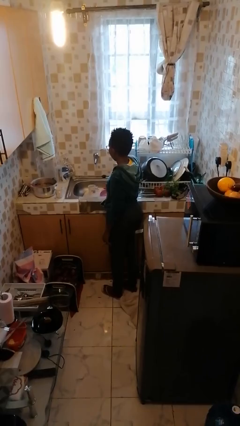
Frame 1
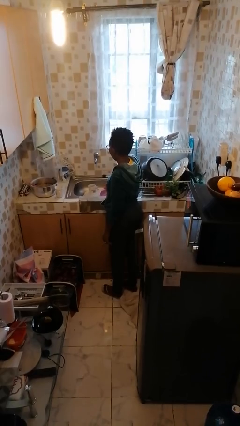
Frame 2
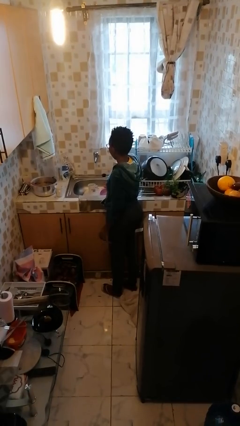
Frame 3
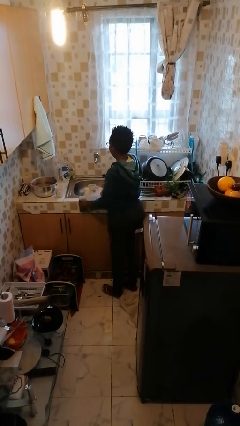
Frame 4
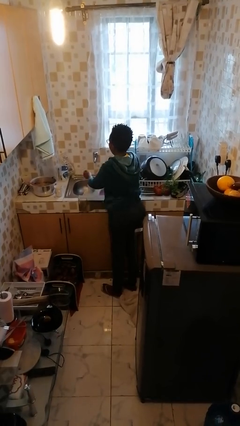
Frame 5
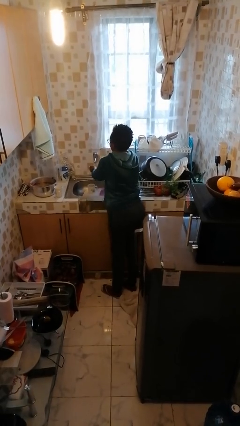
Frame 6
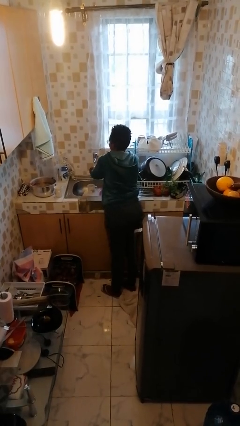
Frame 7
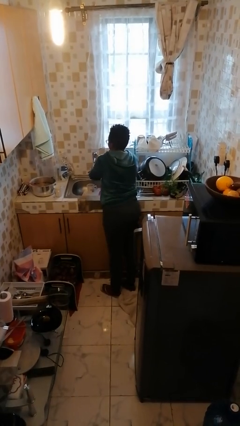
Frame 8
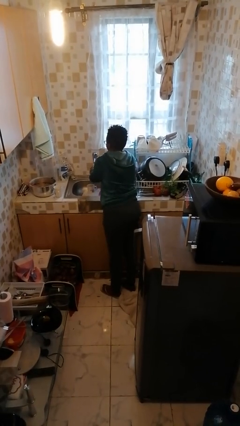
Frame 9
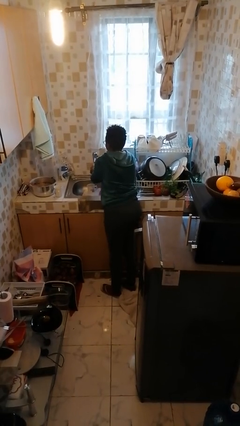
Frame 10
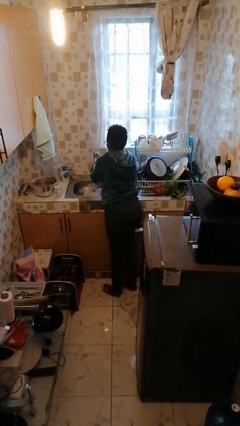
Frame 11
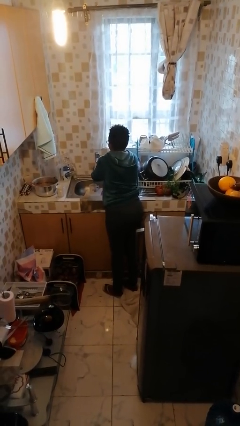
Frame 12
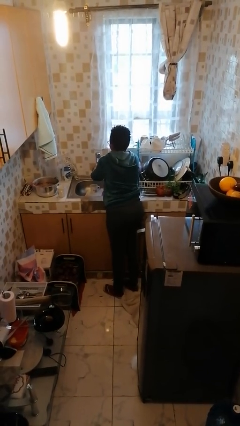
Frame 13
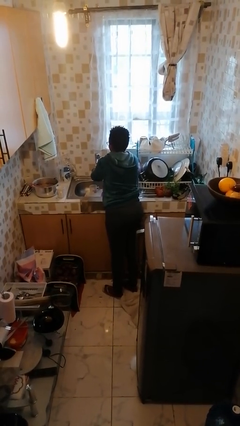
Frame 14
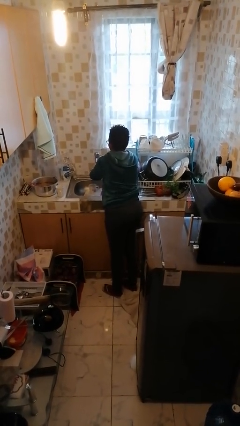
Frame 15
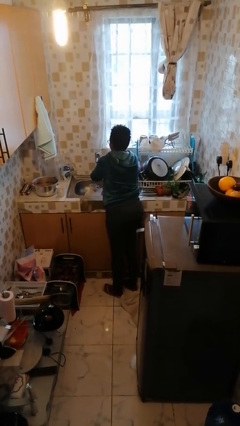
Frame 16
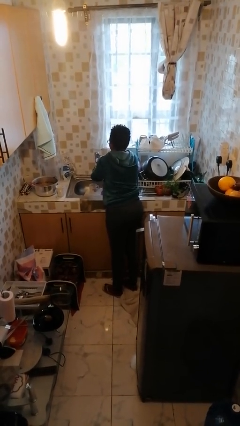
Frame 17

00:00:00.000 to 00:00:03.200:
person washes hands

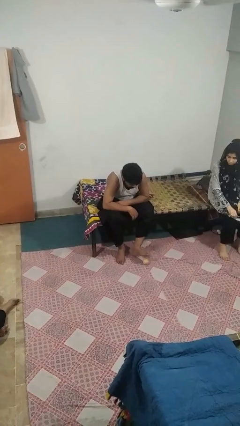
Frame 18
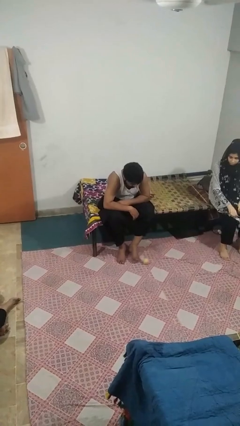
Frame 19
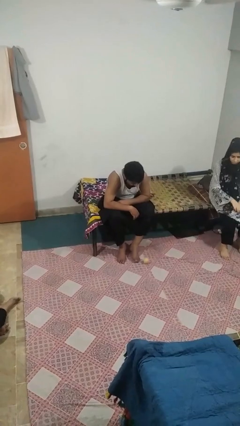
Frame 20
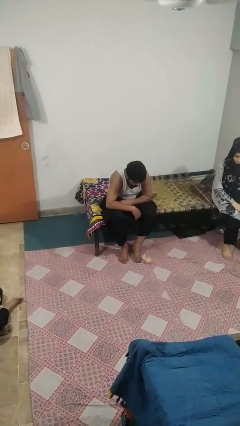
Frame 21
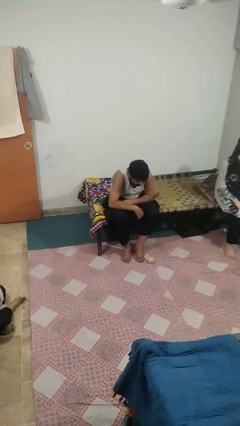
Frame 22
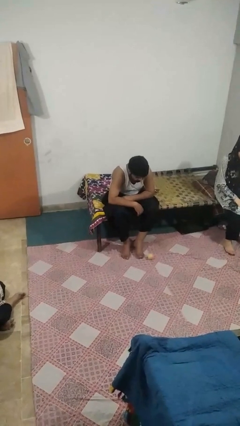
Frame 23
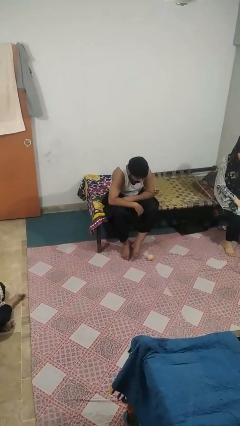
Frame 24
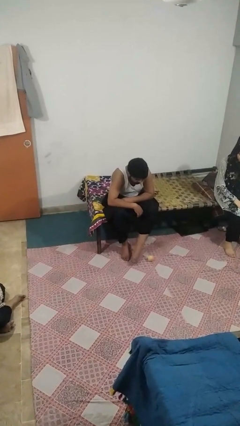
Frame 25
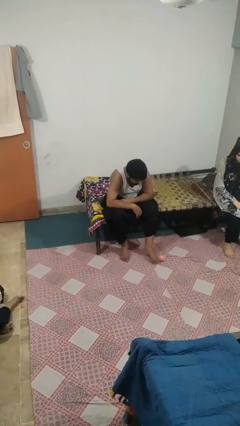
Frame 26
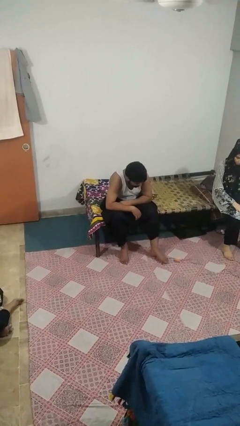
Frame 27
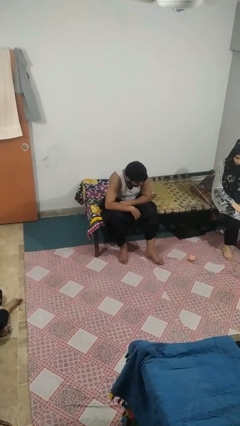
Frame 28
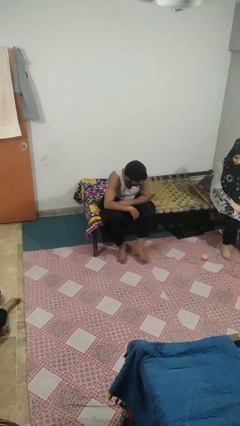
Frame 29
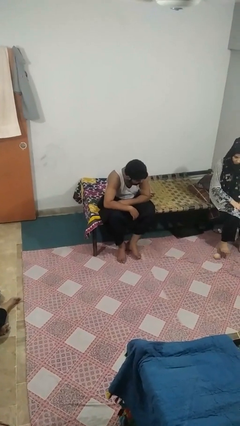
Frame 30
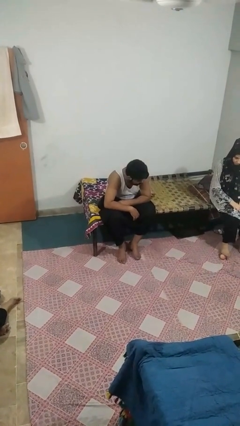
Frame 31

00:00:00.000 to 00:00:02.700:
person kicks object to person

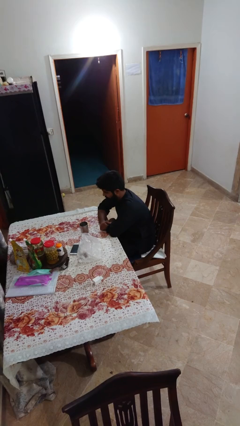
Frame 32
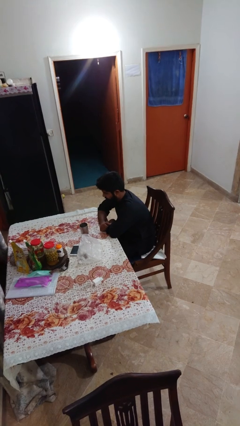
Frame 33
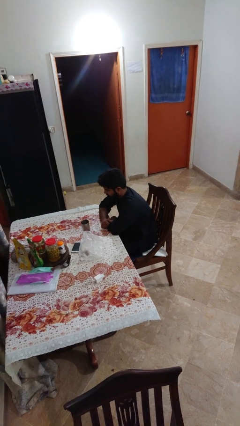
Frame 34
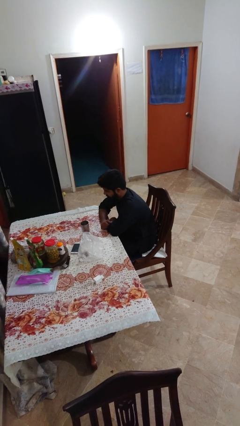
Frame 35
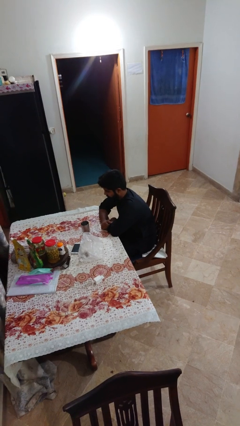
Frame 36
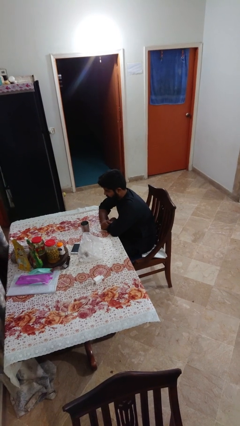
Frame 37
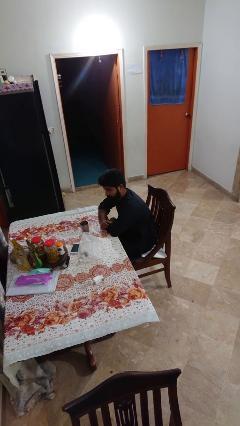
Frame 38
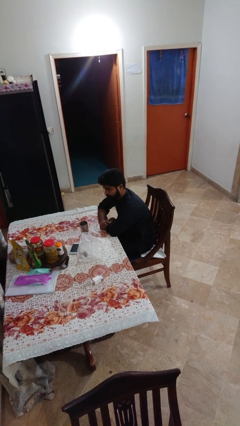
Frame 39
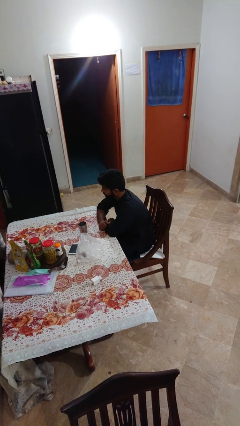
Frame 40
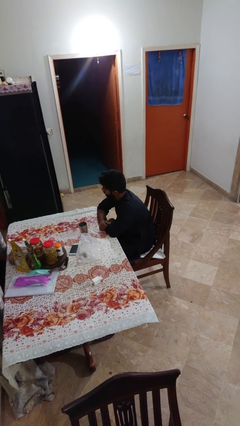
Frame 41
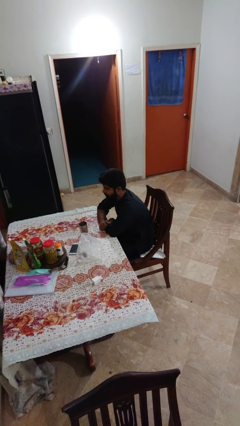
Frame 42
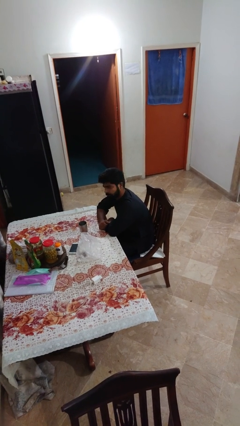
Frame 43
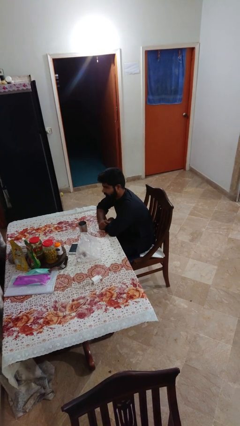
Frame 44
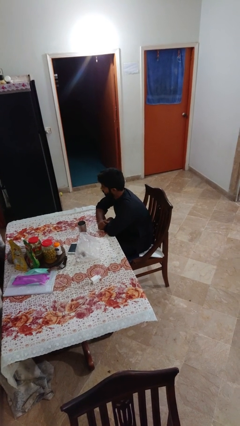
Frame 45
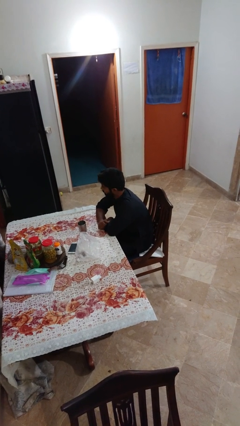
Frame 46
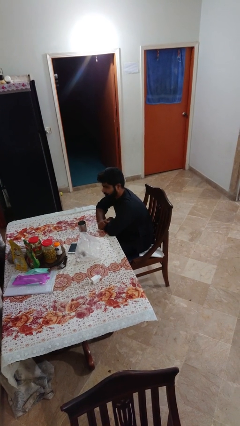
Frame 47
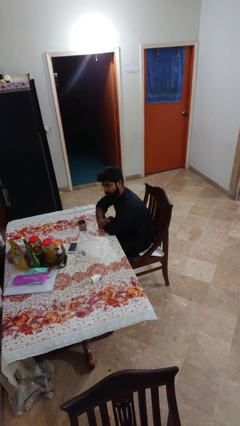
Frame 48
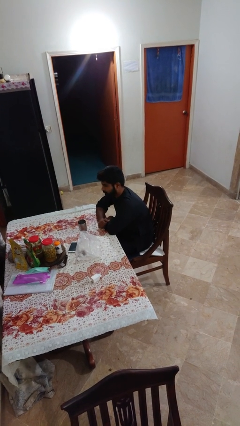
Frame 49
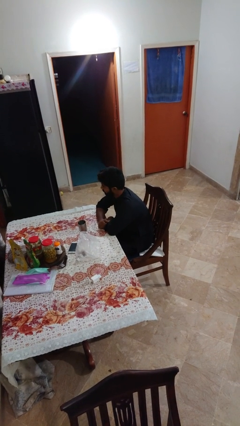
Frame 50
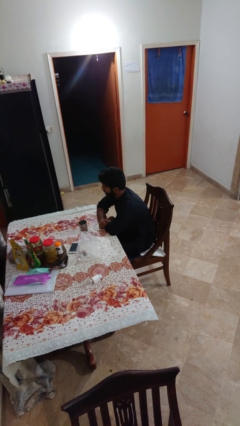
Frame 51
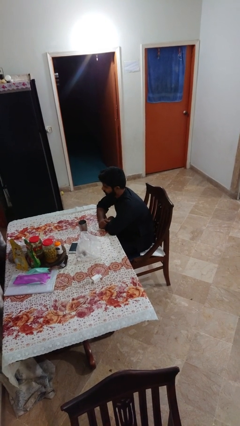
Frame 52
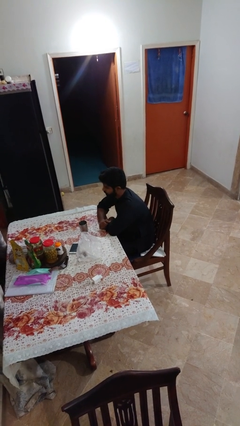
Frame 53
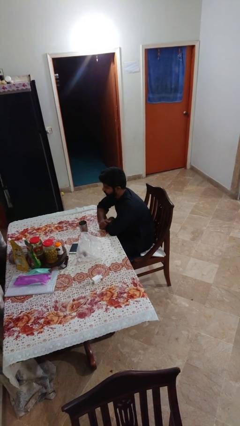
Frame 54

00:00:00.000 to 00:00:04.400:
person shakes head

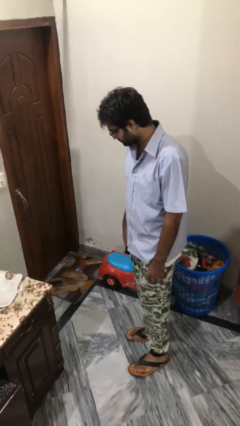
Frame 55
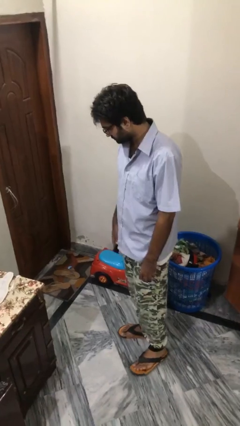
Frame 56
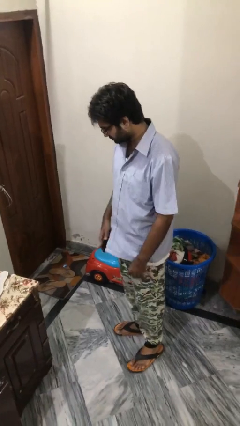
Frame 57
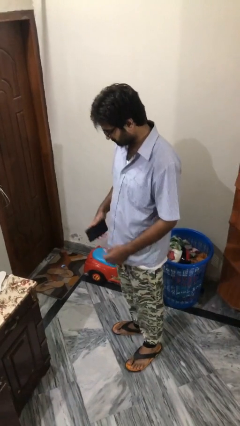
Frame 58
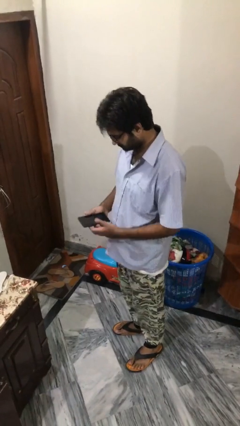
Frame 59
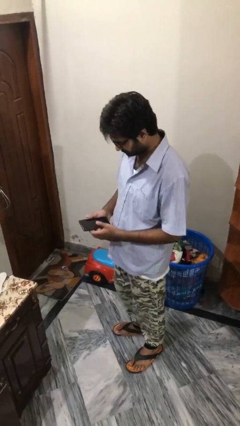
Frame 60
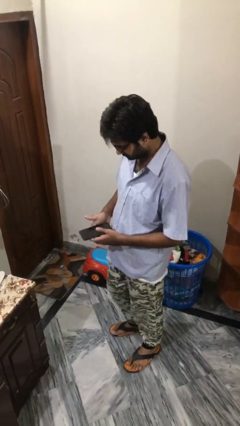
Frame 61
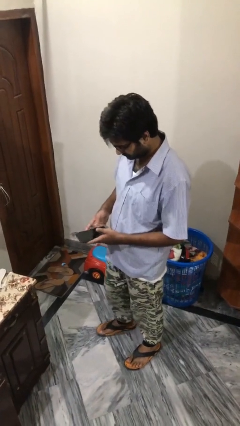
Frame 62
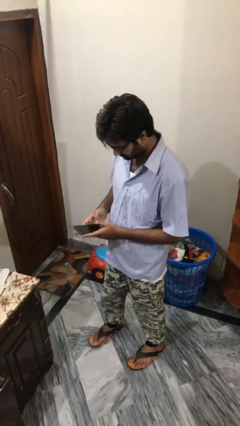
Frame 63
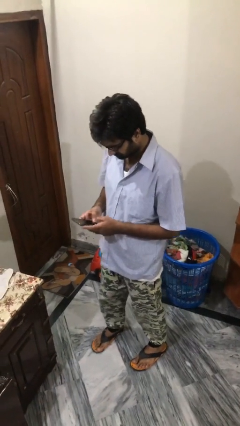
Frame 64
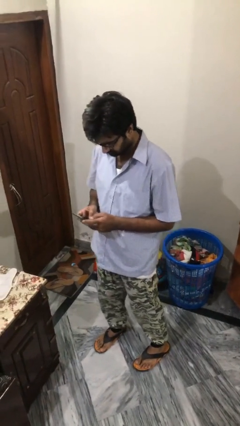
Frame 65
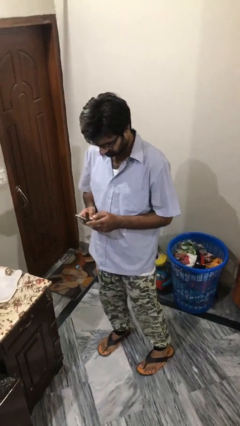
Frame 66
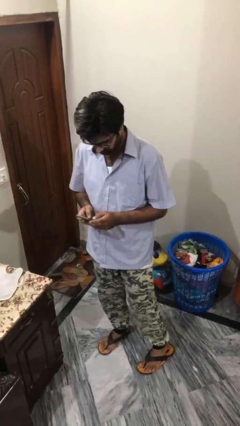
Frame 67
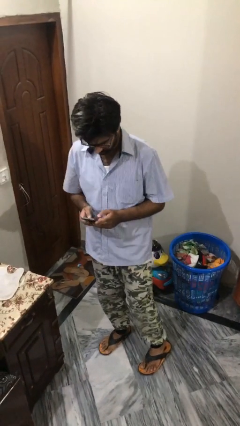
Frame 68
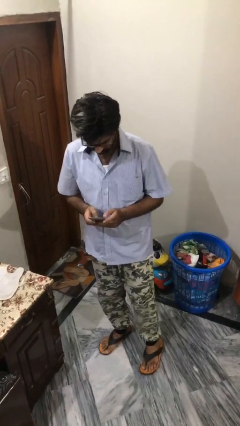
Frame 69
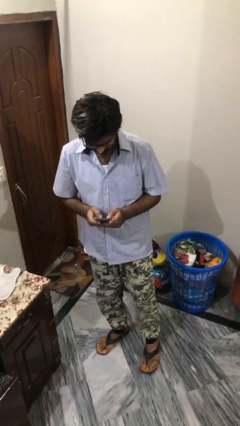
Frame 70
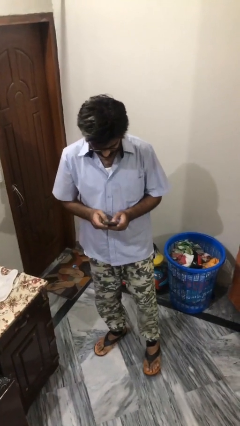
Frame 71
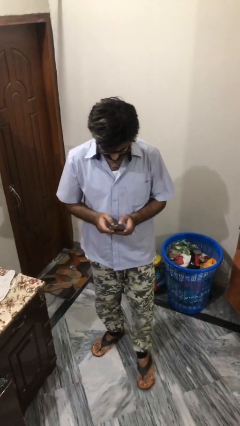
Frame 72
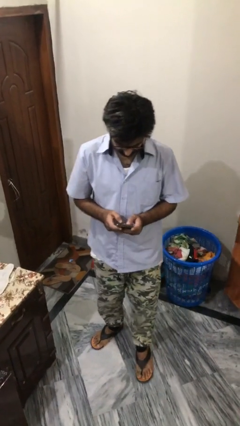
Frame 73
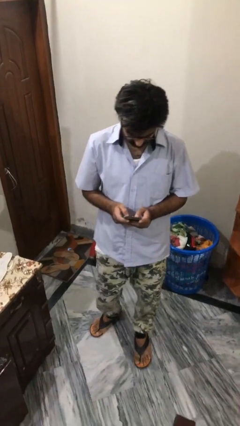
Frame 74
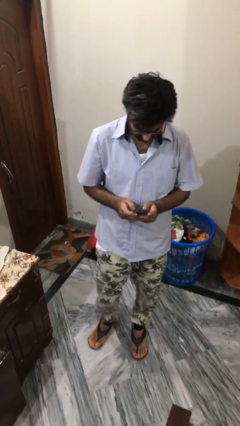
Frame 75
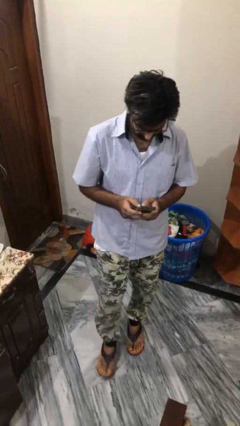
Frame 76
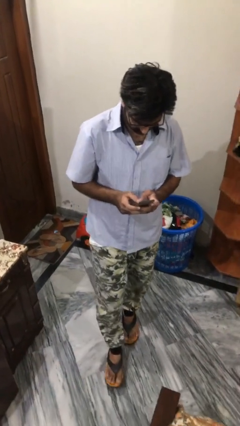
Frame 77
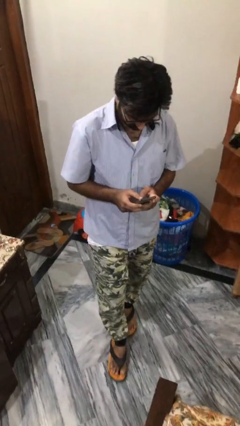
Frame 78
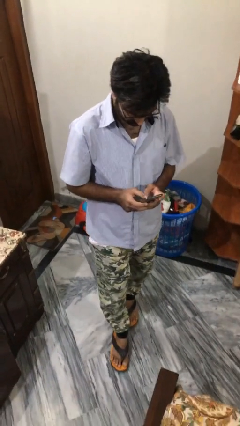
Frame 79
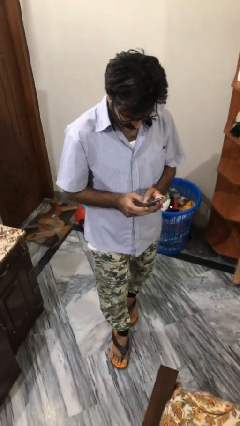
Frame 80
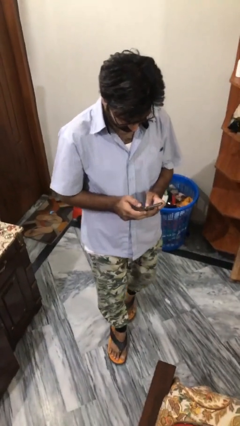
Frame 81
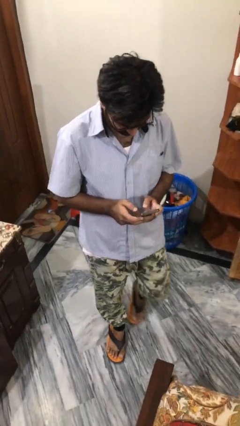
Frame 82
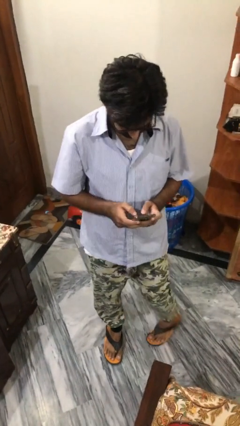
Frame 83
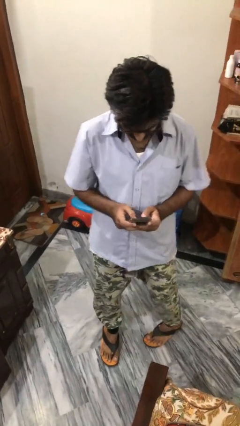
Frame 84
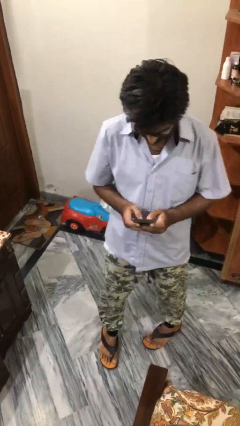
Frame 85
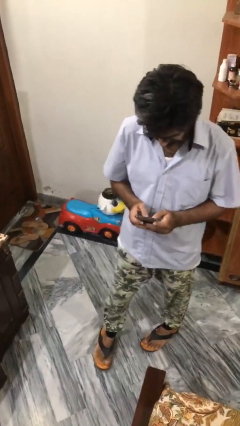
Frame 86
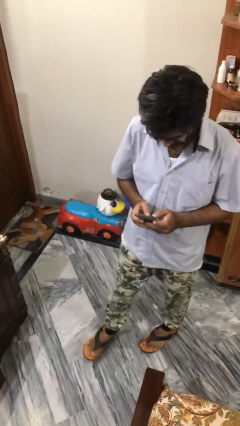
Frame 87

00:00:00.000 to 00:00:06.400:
person texts on phone

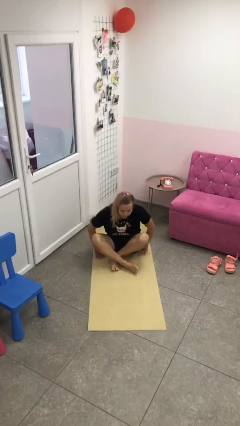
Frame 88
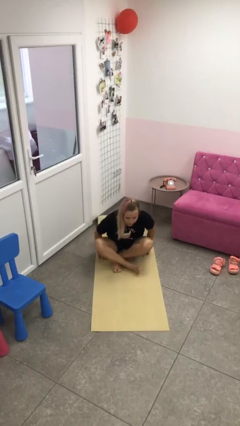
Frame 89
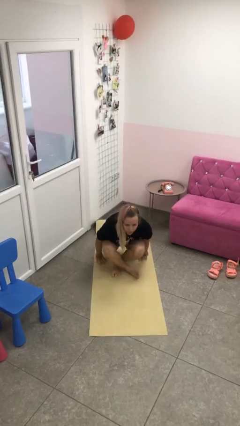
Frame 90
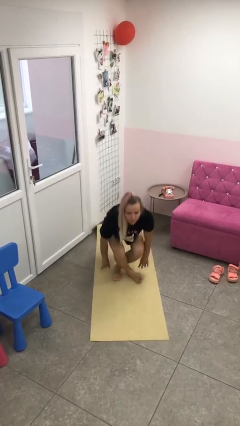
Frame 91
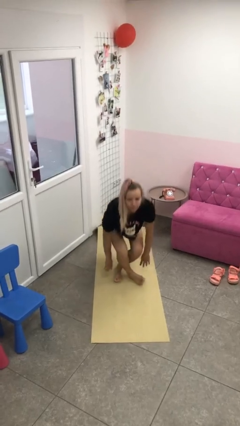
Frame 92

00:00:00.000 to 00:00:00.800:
person stands up from floor
